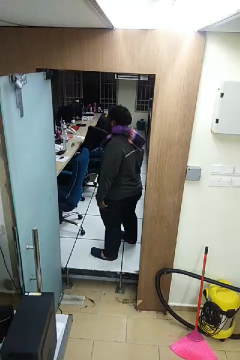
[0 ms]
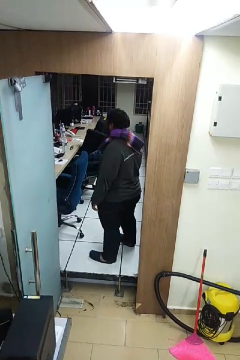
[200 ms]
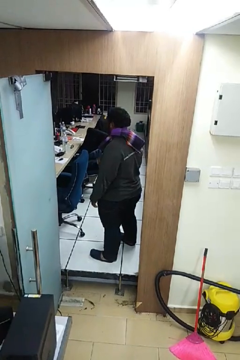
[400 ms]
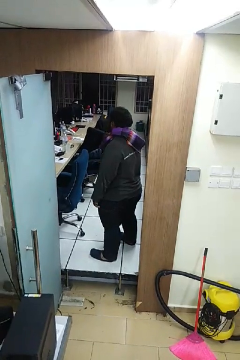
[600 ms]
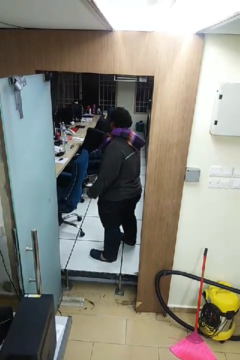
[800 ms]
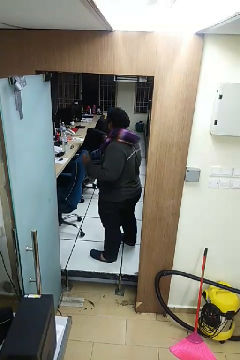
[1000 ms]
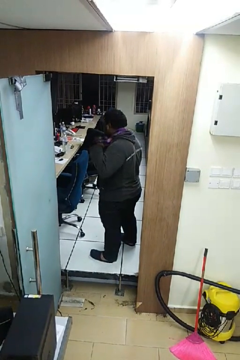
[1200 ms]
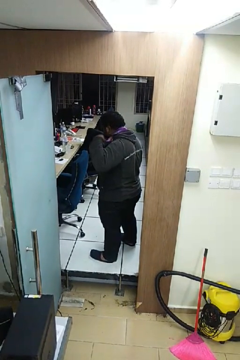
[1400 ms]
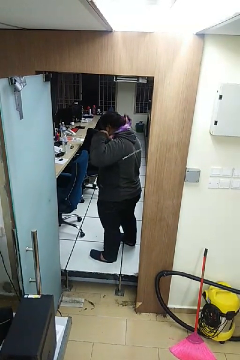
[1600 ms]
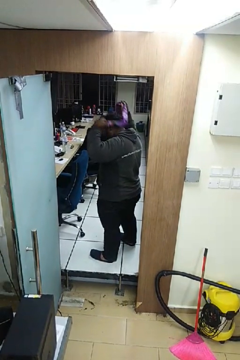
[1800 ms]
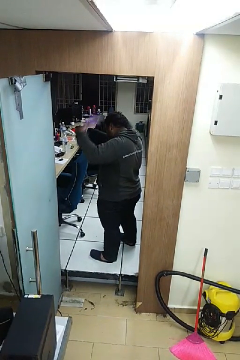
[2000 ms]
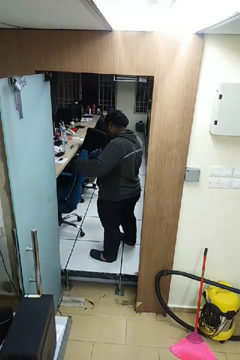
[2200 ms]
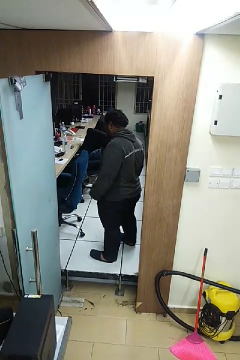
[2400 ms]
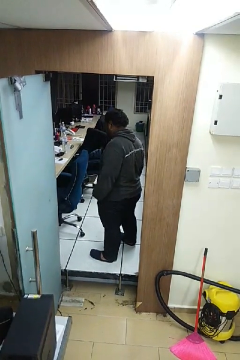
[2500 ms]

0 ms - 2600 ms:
person takes off scarf

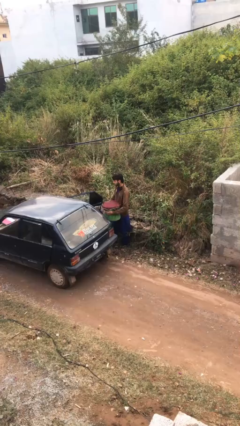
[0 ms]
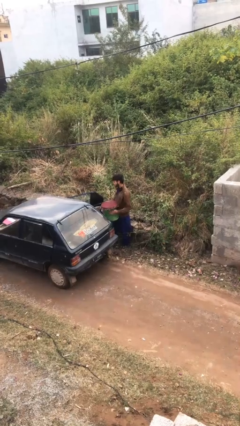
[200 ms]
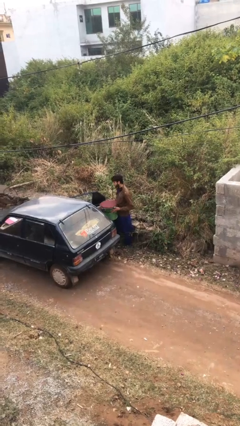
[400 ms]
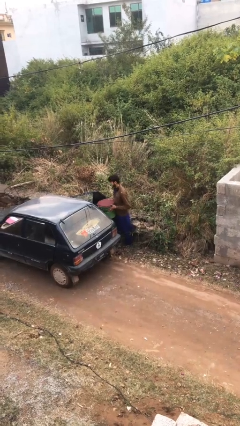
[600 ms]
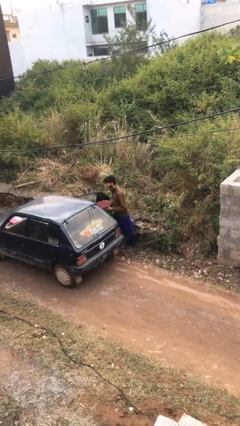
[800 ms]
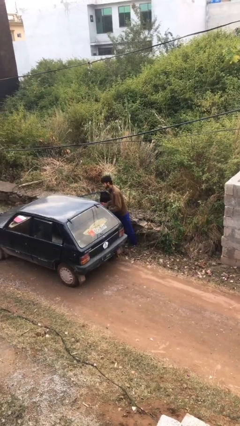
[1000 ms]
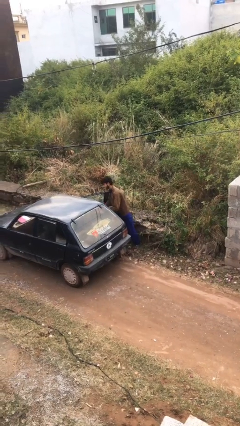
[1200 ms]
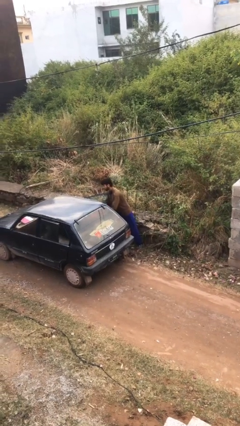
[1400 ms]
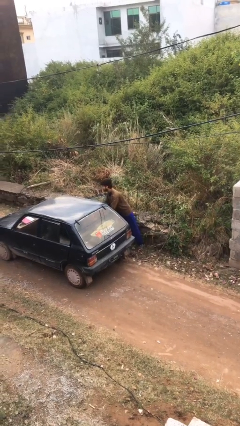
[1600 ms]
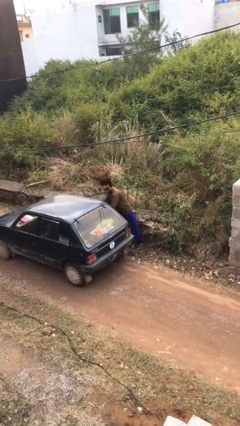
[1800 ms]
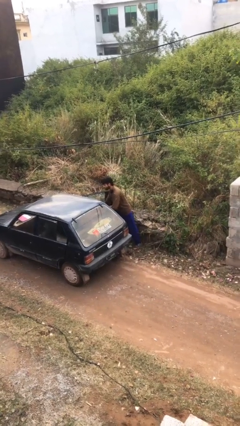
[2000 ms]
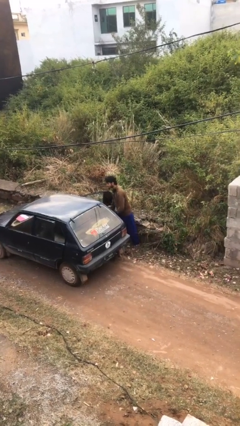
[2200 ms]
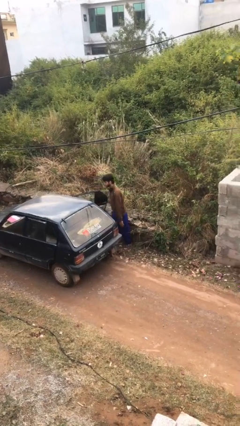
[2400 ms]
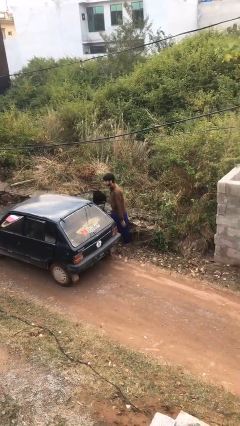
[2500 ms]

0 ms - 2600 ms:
person loads car

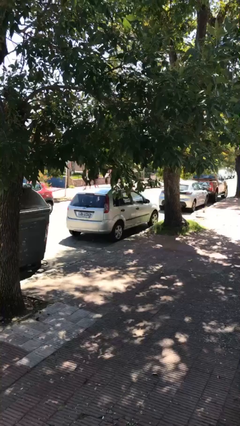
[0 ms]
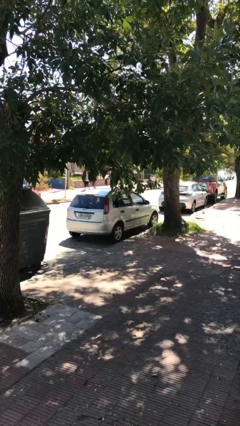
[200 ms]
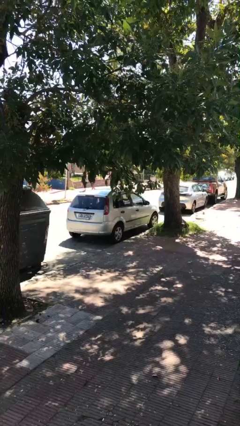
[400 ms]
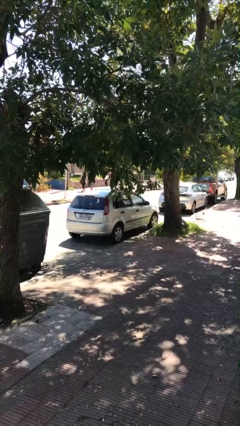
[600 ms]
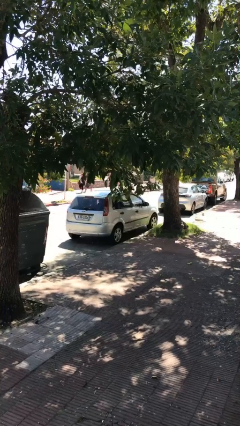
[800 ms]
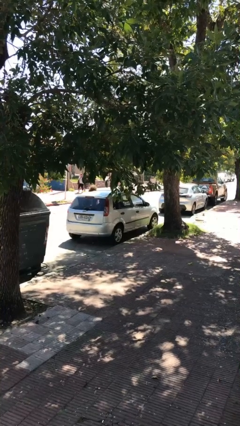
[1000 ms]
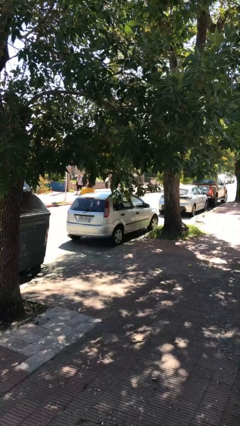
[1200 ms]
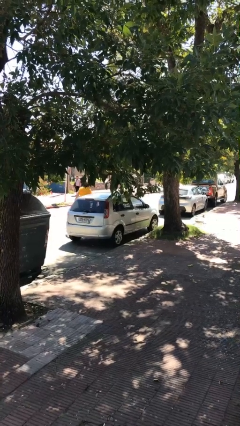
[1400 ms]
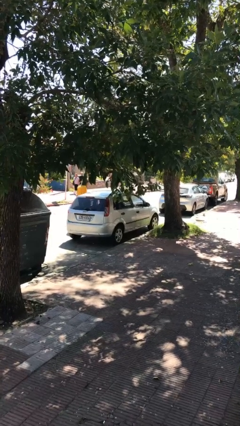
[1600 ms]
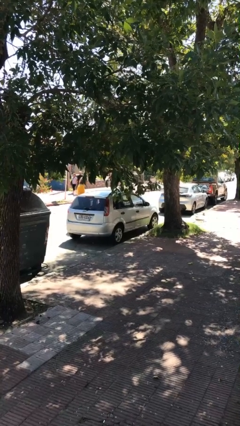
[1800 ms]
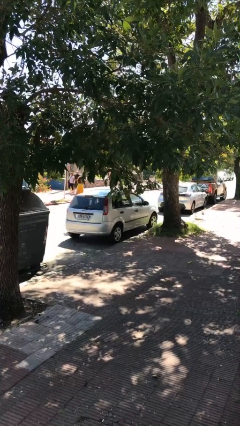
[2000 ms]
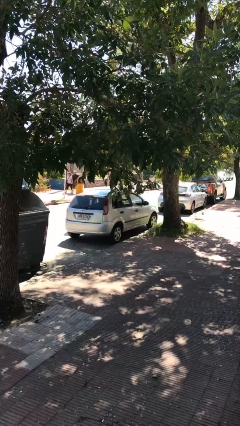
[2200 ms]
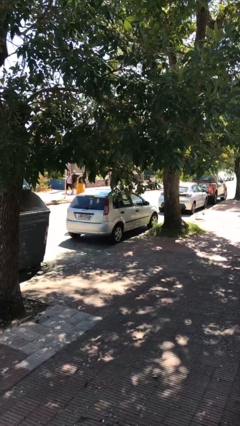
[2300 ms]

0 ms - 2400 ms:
car drops off person

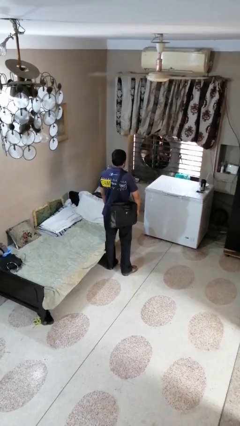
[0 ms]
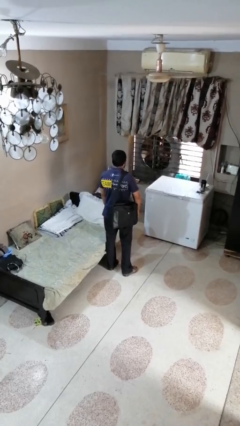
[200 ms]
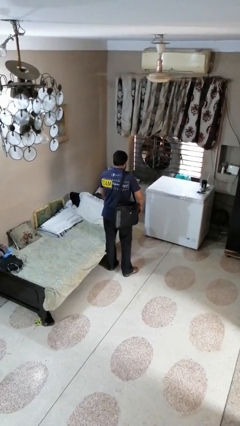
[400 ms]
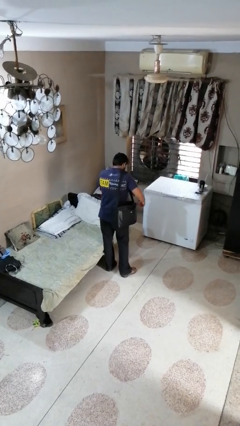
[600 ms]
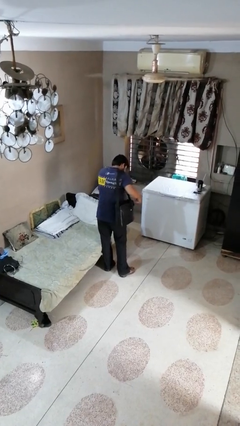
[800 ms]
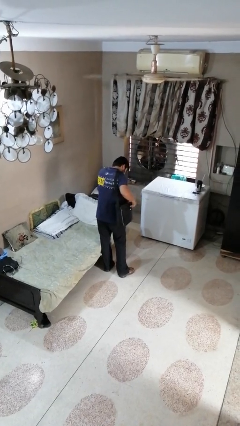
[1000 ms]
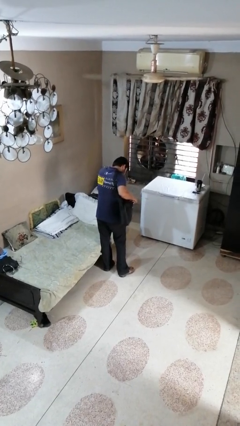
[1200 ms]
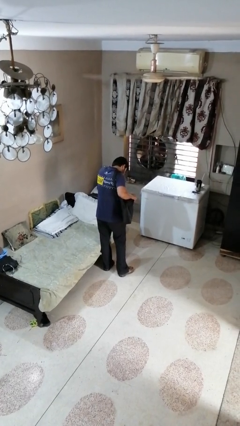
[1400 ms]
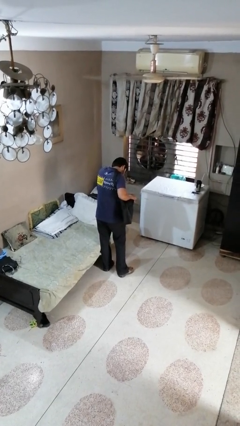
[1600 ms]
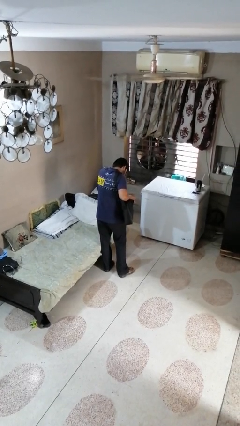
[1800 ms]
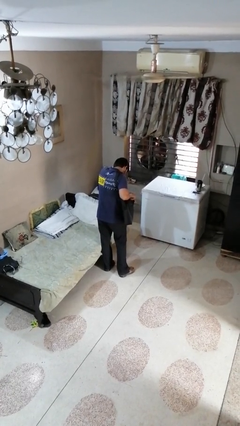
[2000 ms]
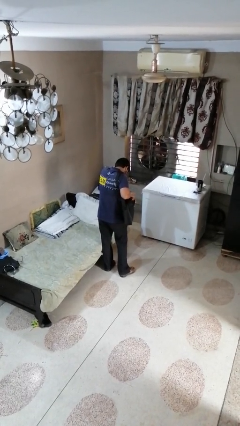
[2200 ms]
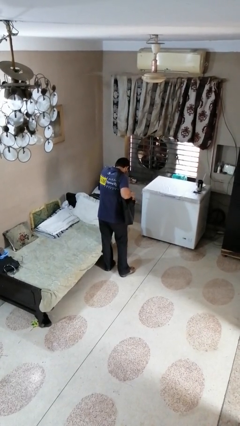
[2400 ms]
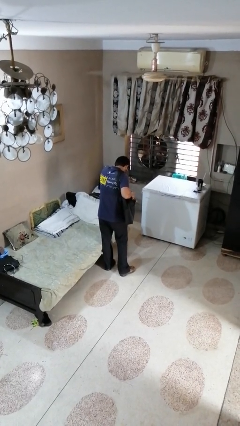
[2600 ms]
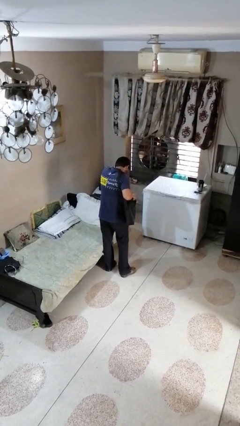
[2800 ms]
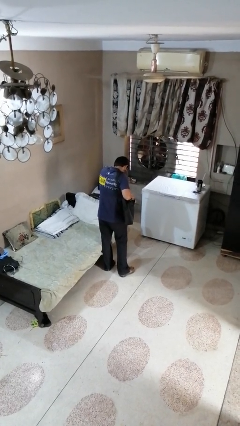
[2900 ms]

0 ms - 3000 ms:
person searches in backpack

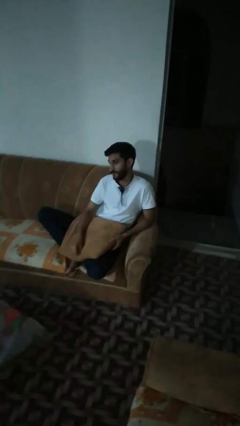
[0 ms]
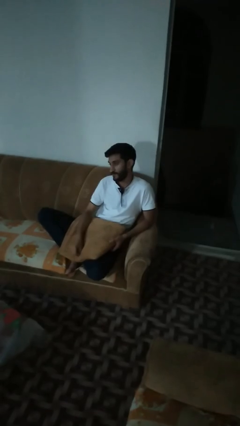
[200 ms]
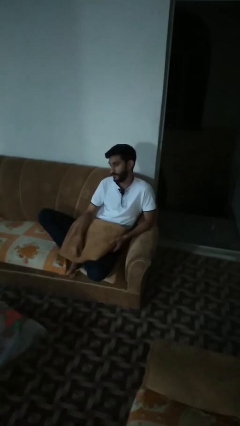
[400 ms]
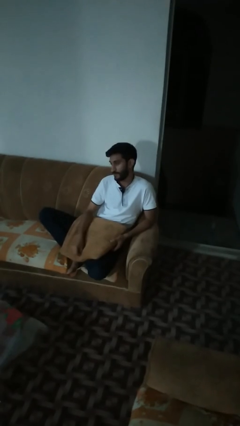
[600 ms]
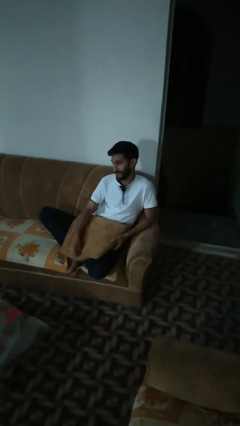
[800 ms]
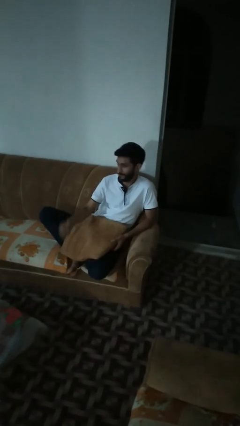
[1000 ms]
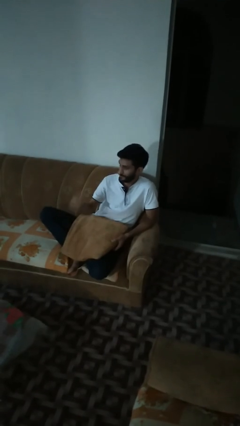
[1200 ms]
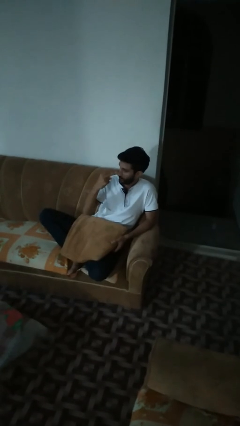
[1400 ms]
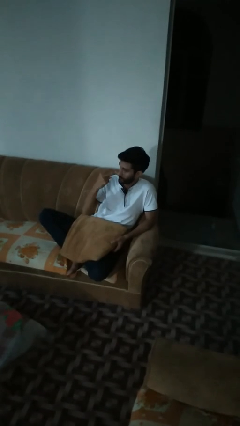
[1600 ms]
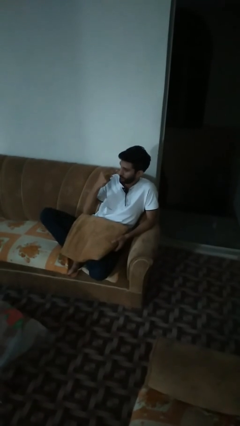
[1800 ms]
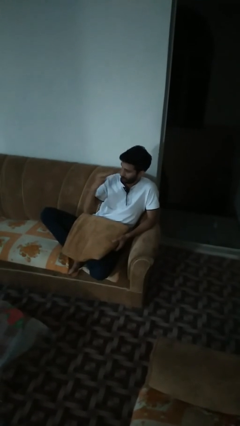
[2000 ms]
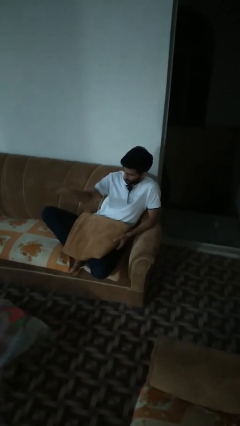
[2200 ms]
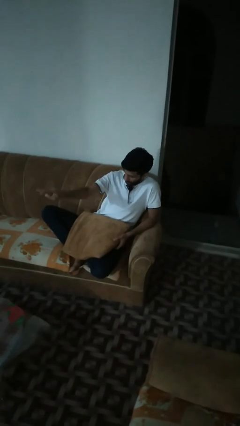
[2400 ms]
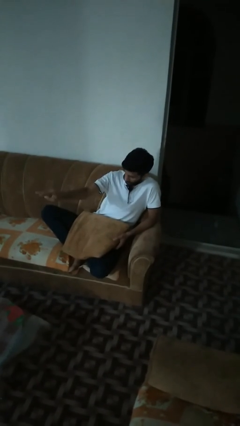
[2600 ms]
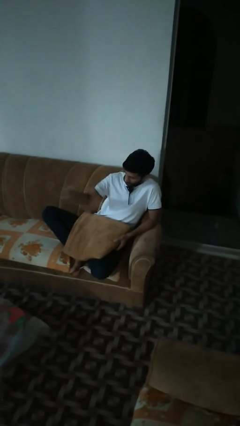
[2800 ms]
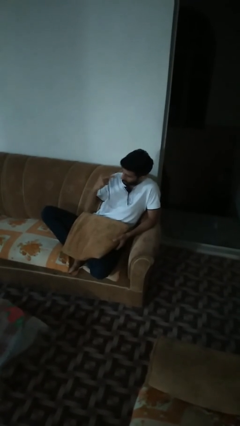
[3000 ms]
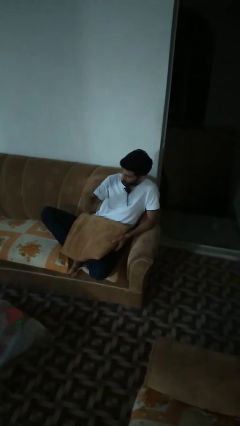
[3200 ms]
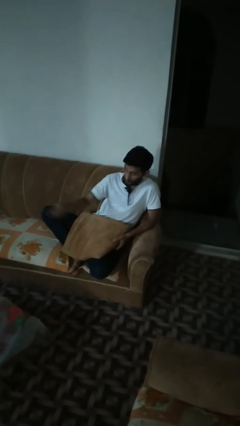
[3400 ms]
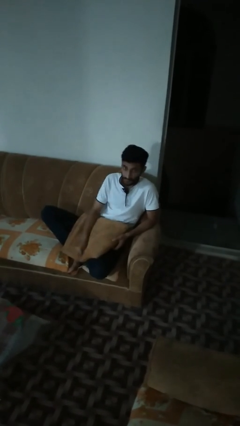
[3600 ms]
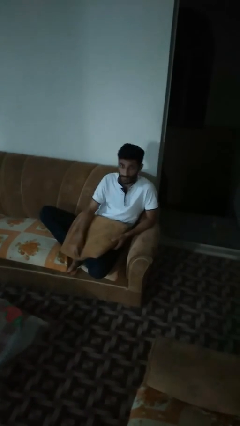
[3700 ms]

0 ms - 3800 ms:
person gestures watch closely

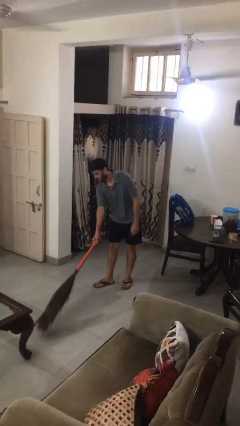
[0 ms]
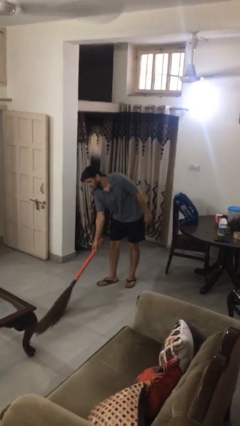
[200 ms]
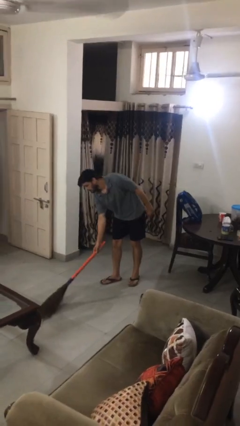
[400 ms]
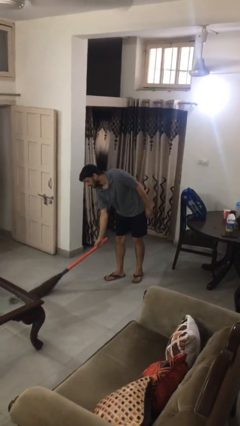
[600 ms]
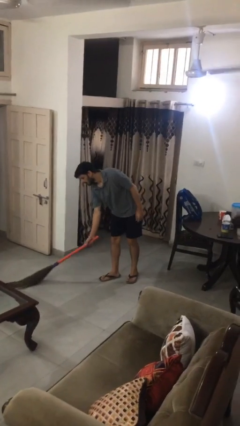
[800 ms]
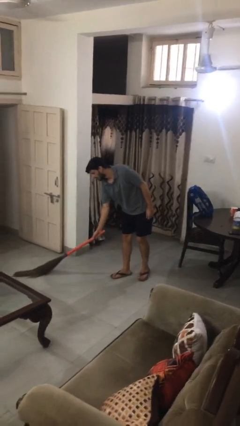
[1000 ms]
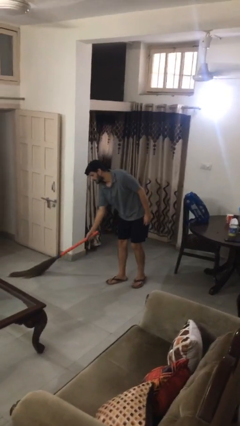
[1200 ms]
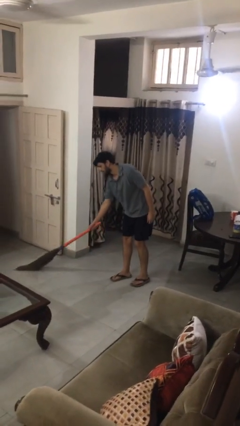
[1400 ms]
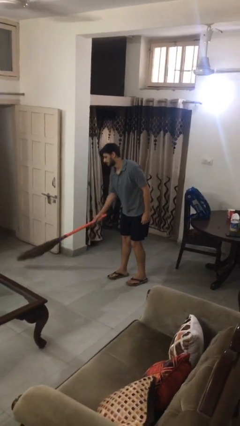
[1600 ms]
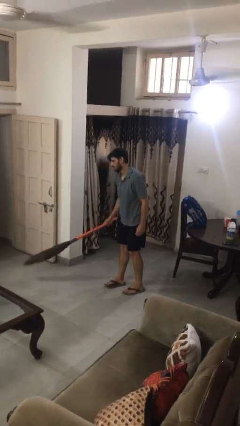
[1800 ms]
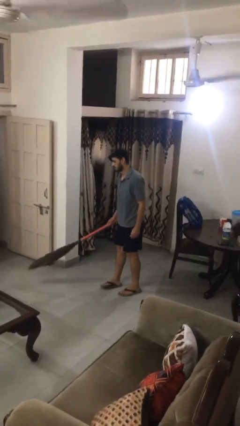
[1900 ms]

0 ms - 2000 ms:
person sweeps floor

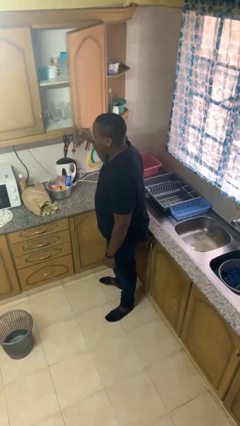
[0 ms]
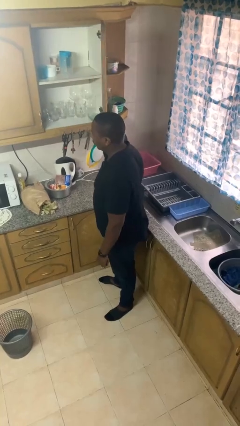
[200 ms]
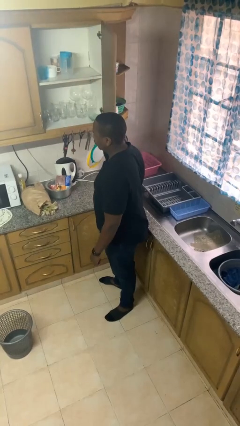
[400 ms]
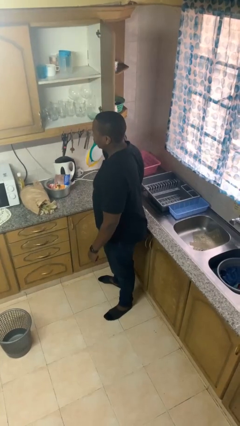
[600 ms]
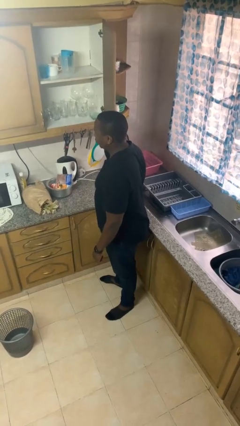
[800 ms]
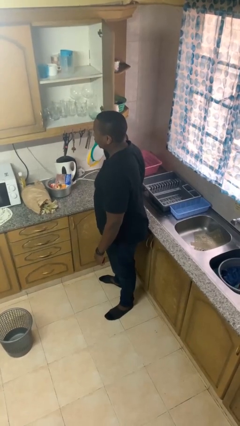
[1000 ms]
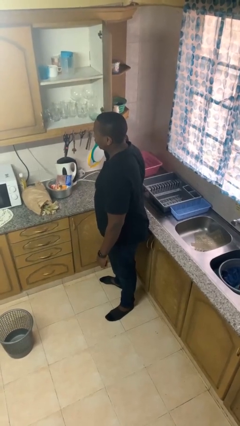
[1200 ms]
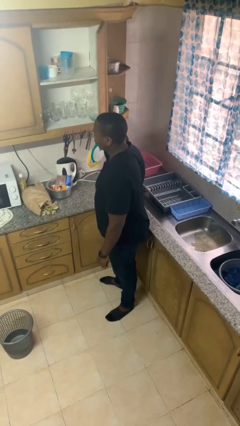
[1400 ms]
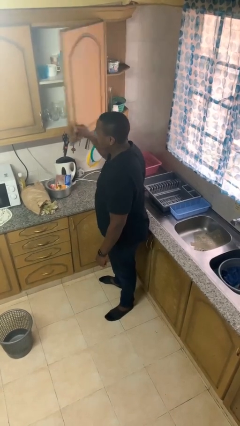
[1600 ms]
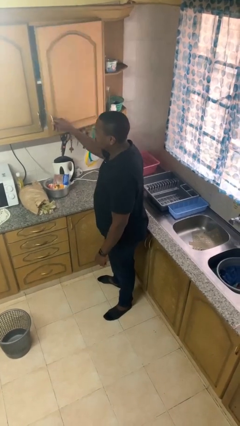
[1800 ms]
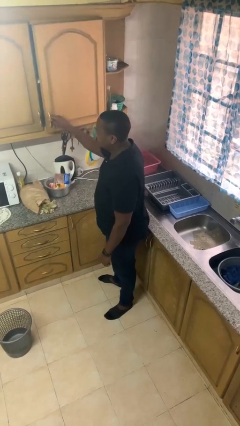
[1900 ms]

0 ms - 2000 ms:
person opens cabinet
